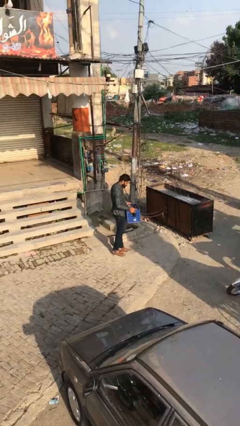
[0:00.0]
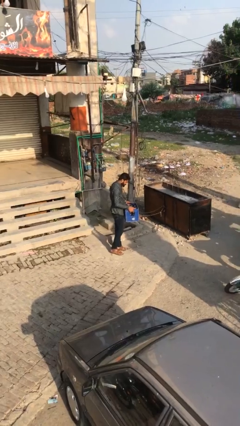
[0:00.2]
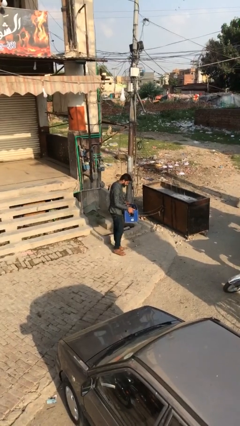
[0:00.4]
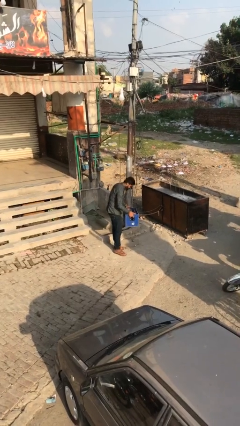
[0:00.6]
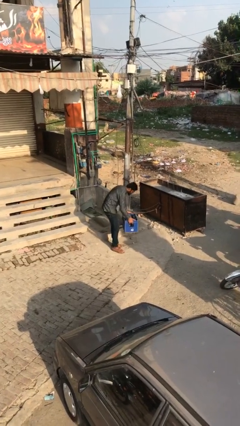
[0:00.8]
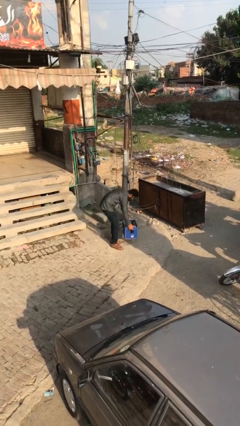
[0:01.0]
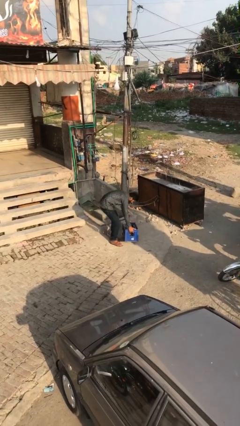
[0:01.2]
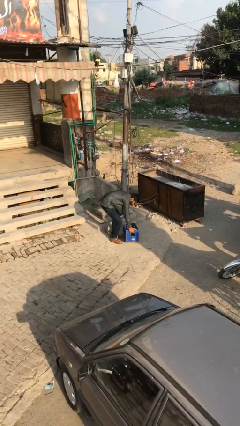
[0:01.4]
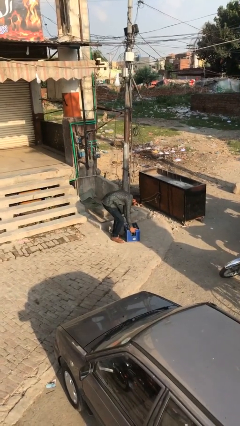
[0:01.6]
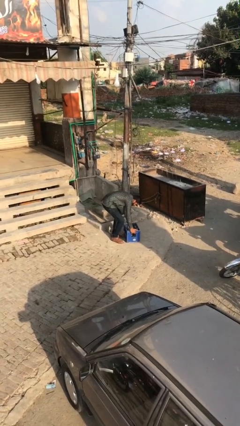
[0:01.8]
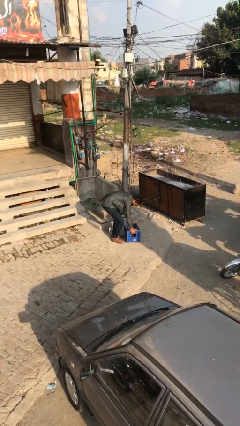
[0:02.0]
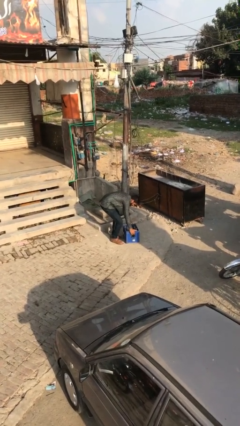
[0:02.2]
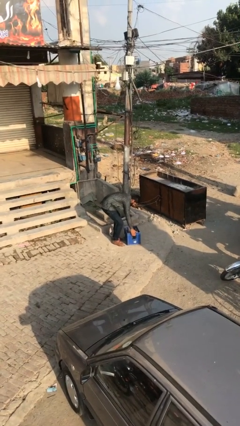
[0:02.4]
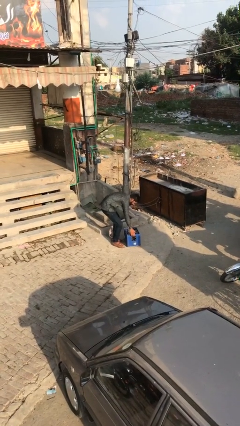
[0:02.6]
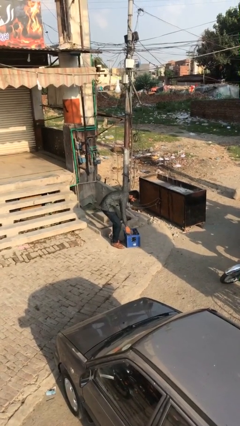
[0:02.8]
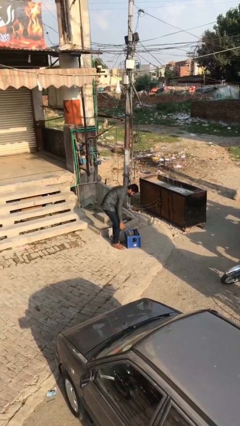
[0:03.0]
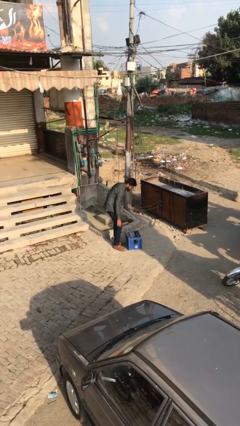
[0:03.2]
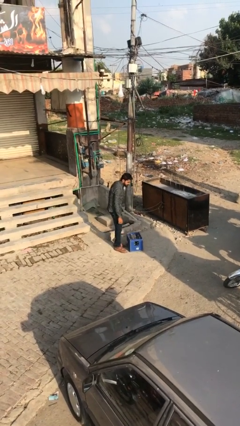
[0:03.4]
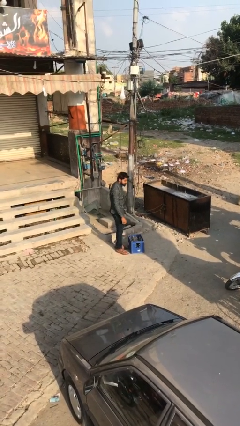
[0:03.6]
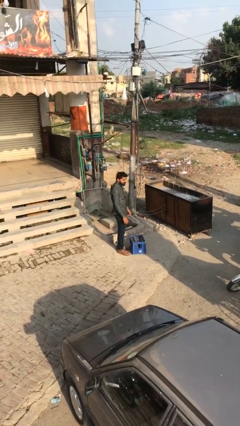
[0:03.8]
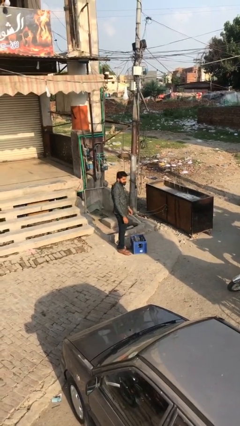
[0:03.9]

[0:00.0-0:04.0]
person puts down object on floor

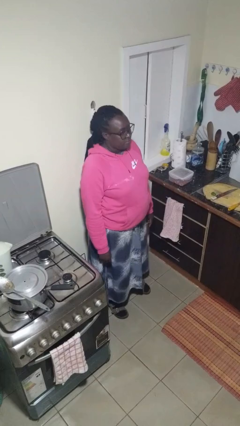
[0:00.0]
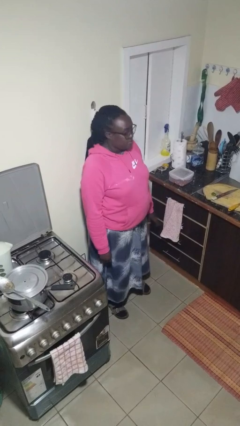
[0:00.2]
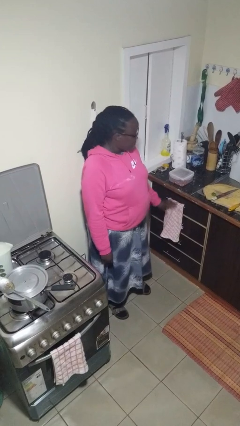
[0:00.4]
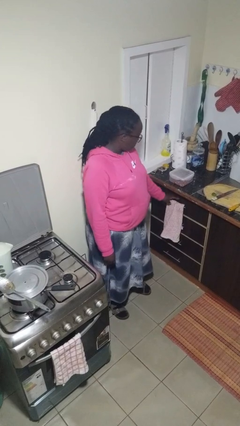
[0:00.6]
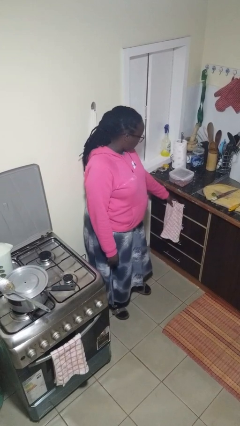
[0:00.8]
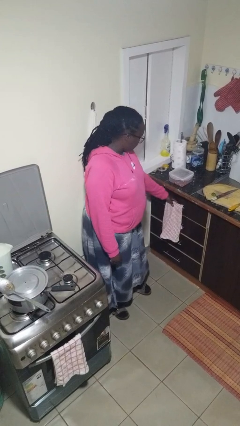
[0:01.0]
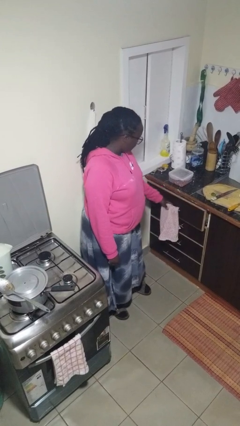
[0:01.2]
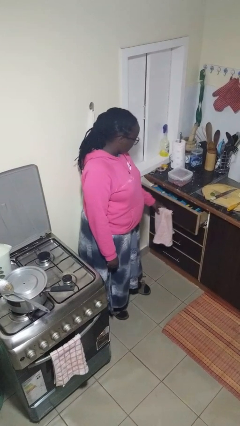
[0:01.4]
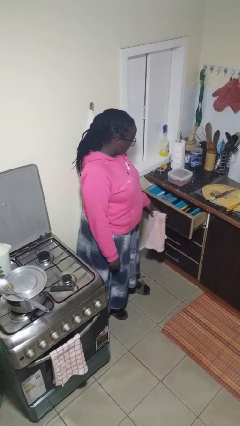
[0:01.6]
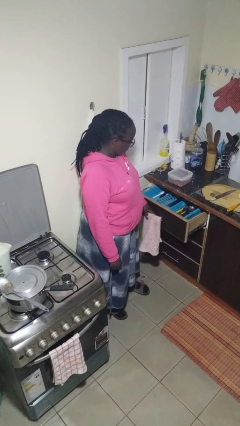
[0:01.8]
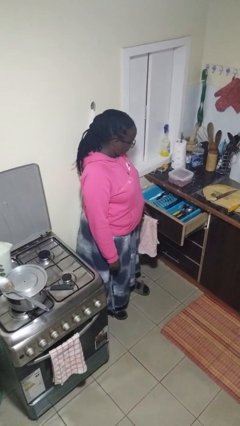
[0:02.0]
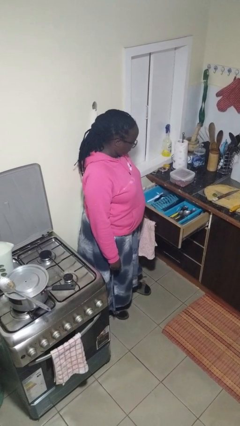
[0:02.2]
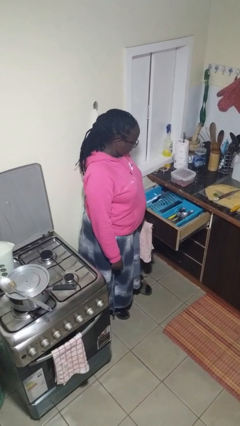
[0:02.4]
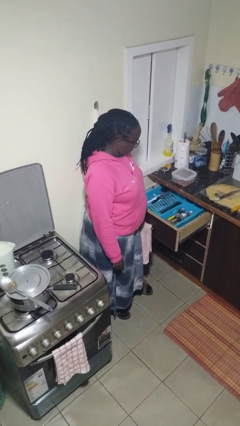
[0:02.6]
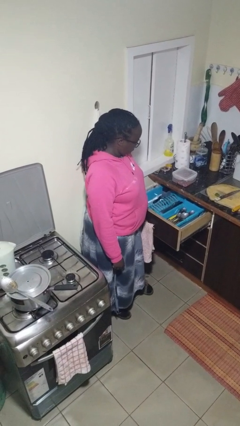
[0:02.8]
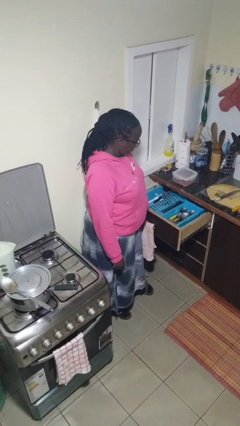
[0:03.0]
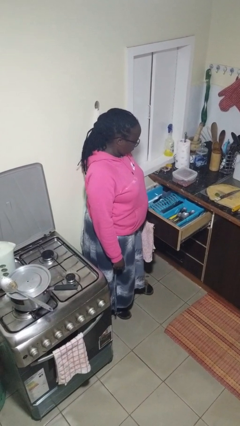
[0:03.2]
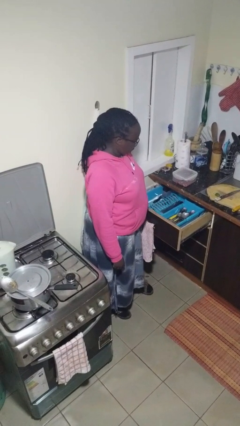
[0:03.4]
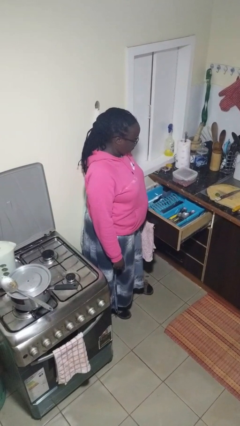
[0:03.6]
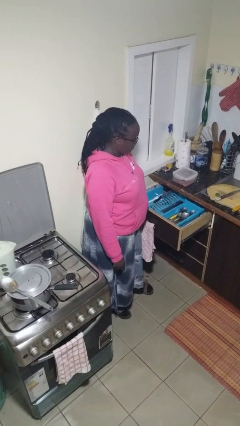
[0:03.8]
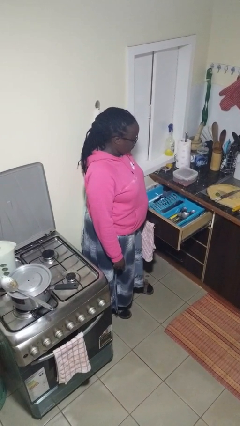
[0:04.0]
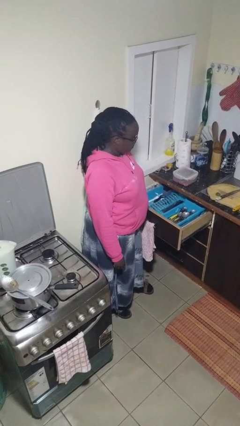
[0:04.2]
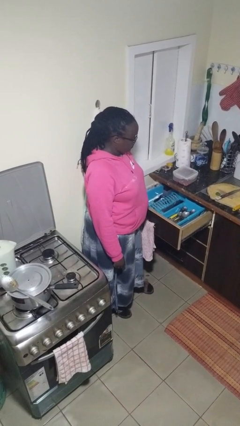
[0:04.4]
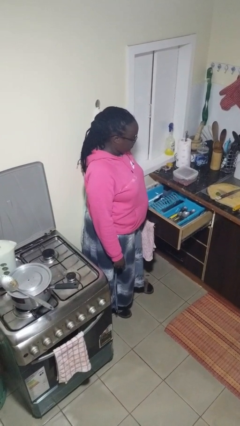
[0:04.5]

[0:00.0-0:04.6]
person opens kitchen drawer

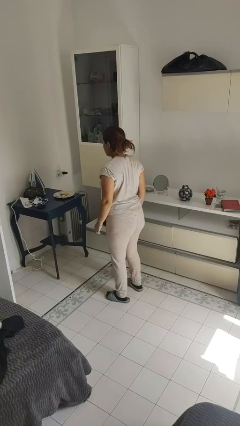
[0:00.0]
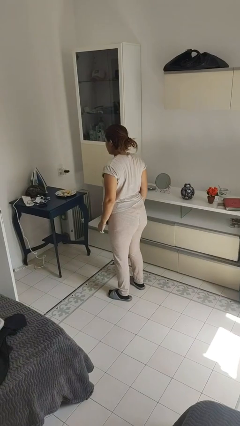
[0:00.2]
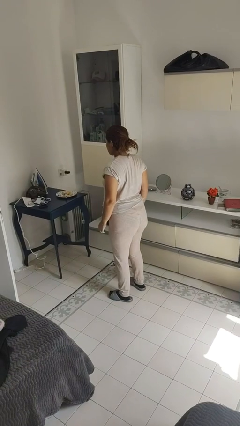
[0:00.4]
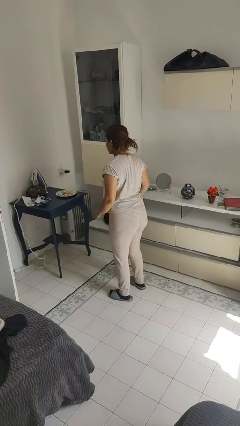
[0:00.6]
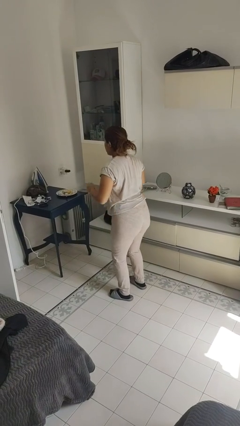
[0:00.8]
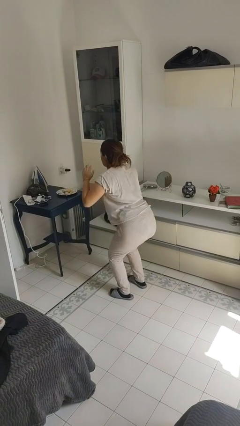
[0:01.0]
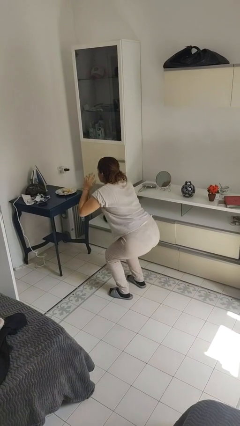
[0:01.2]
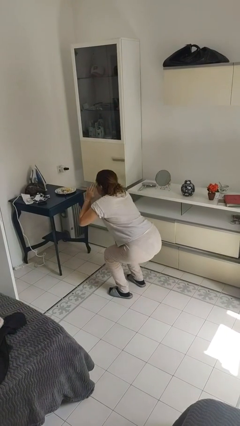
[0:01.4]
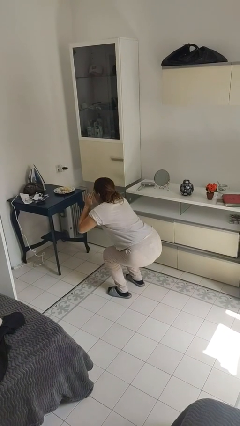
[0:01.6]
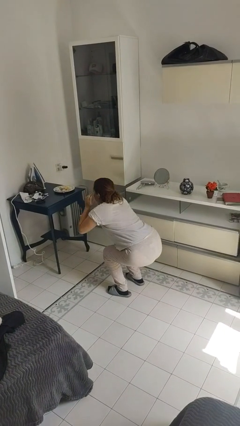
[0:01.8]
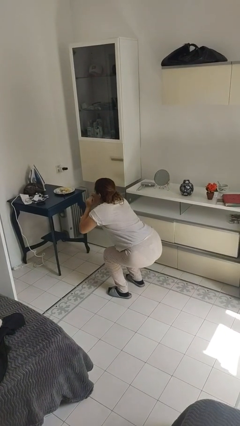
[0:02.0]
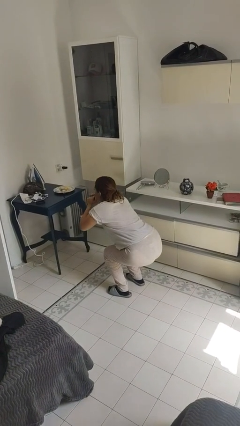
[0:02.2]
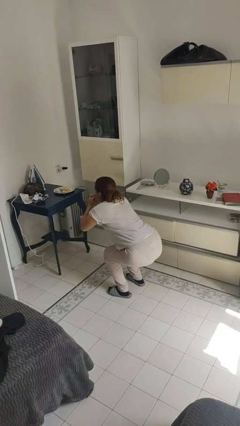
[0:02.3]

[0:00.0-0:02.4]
person squats

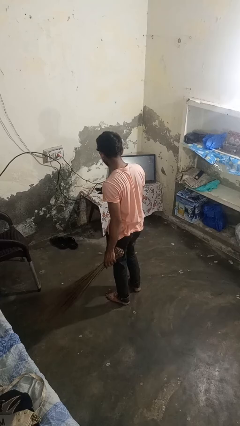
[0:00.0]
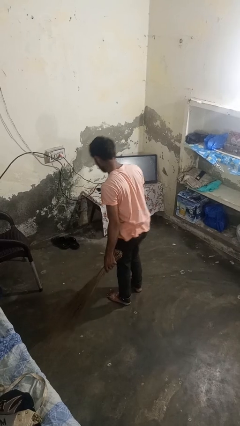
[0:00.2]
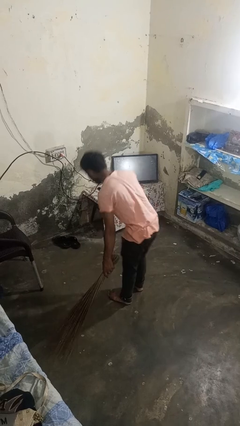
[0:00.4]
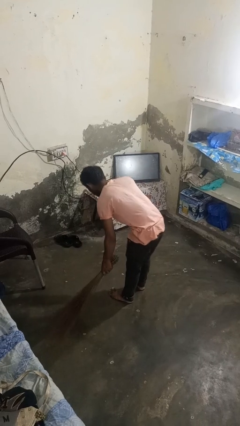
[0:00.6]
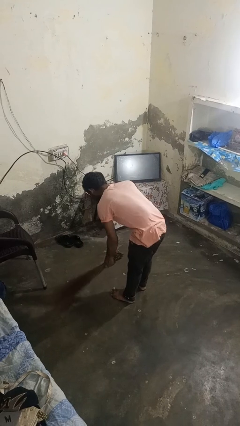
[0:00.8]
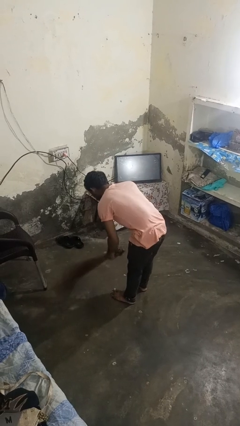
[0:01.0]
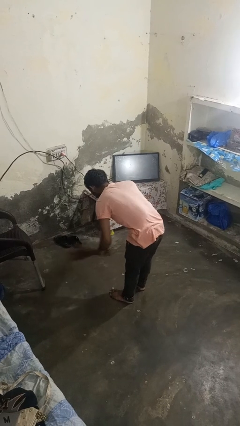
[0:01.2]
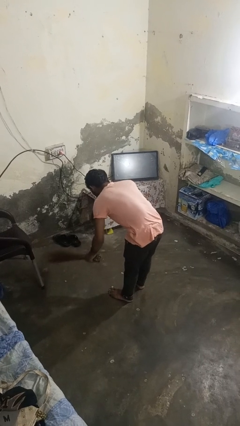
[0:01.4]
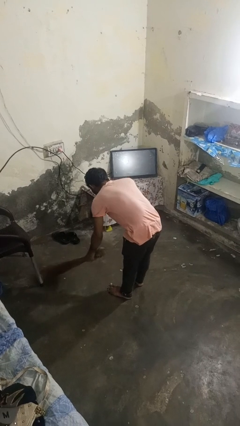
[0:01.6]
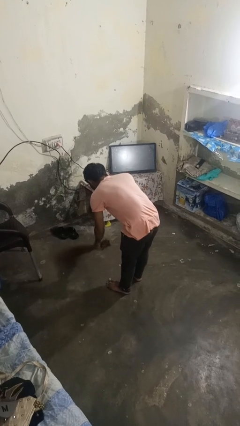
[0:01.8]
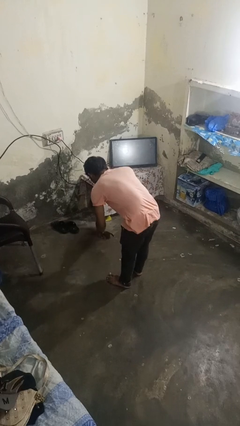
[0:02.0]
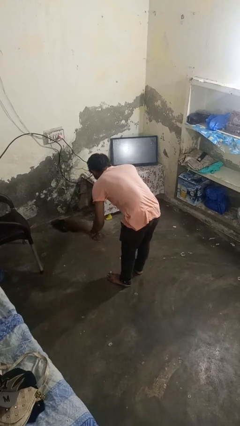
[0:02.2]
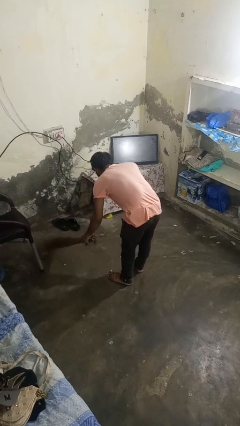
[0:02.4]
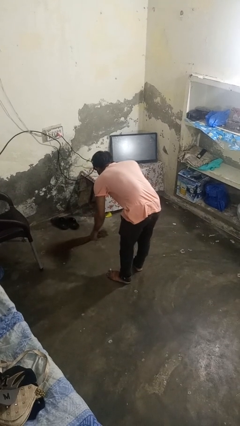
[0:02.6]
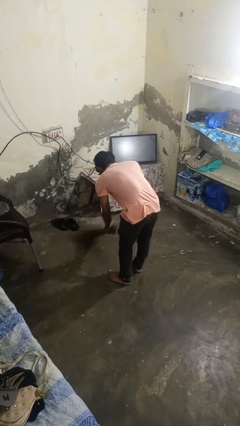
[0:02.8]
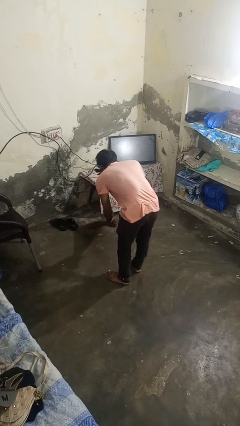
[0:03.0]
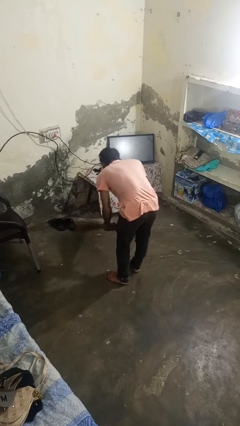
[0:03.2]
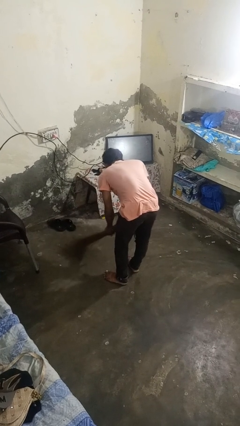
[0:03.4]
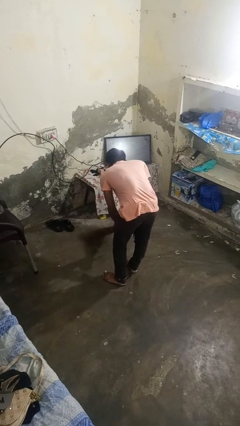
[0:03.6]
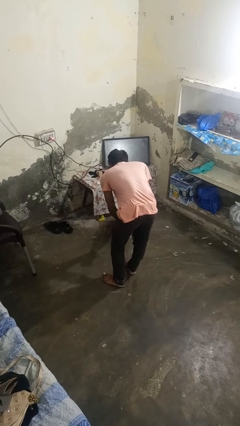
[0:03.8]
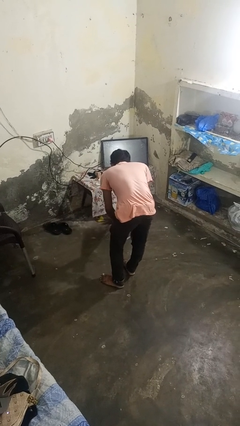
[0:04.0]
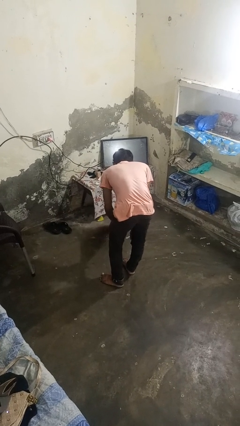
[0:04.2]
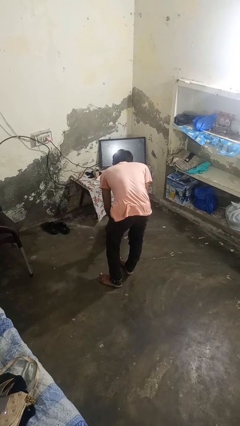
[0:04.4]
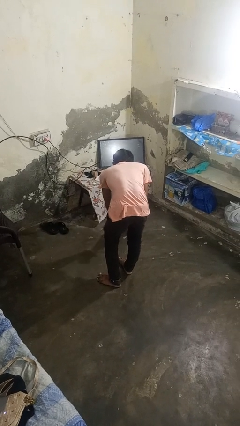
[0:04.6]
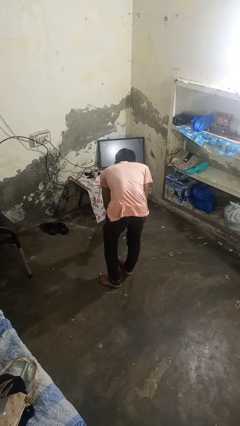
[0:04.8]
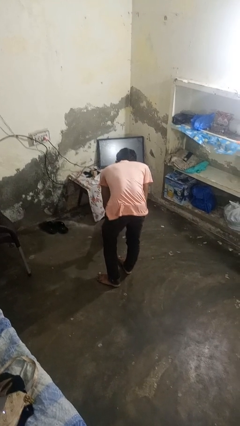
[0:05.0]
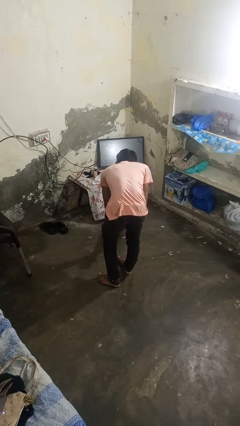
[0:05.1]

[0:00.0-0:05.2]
person sweeps floor

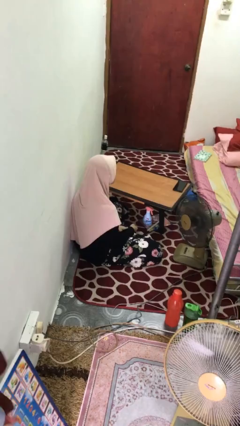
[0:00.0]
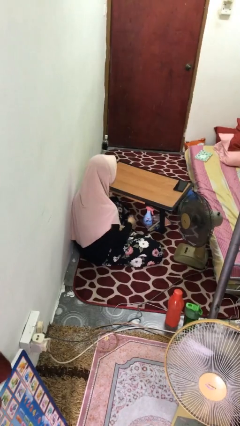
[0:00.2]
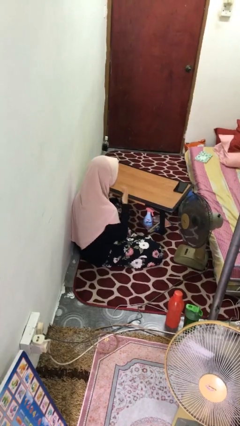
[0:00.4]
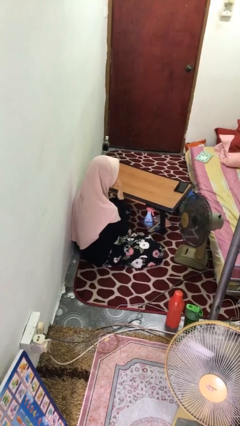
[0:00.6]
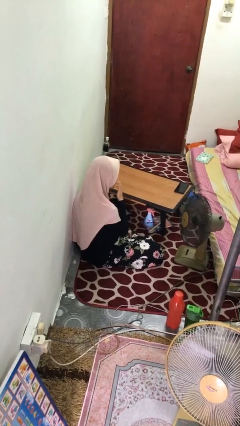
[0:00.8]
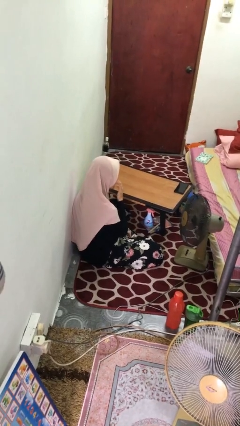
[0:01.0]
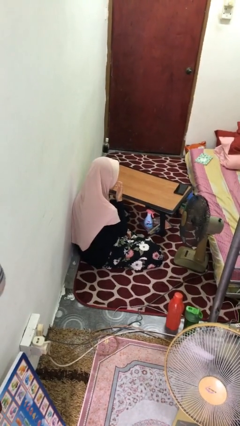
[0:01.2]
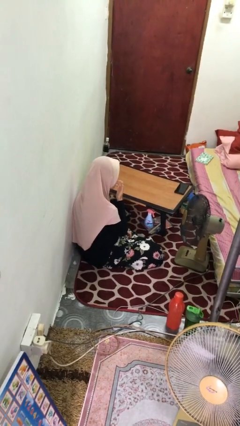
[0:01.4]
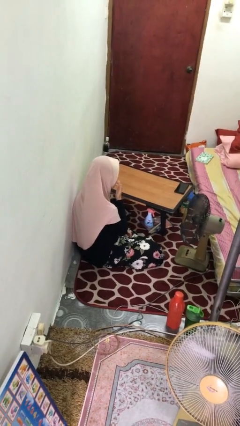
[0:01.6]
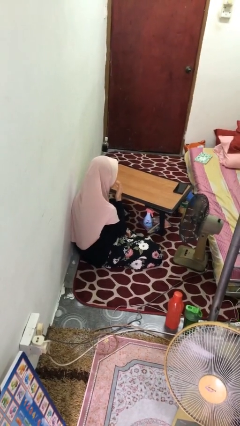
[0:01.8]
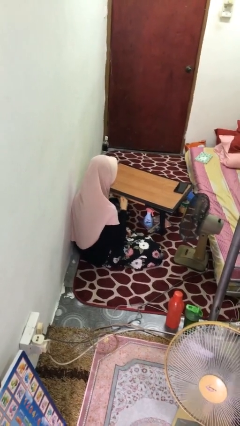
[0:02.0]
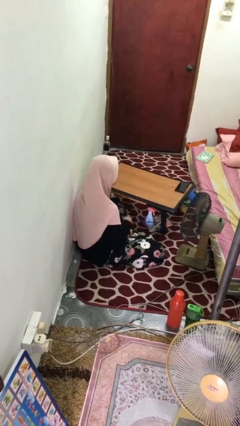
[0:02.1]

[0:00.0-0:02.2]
person licks fingers
